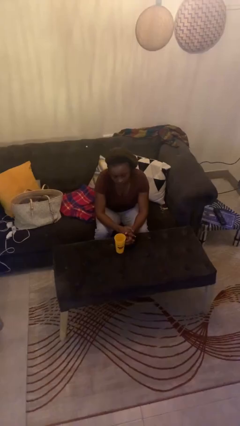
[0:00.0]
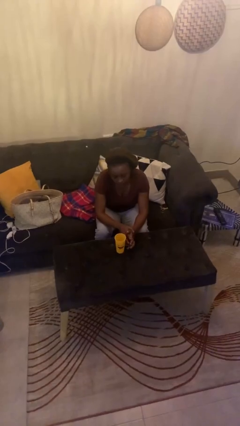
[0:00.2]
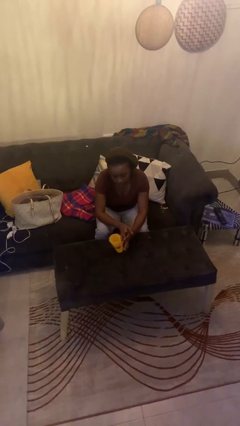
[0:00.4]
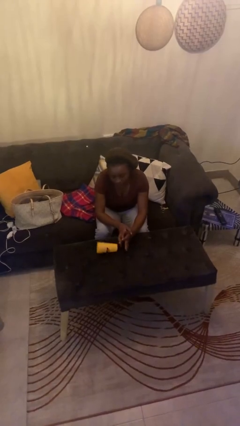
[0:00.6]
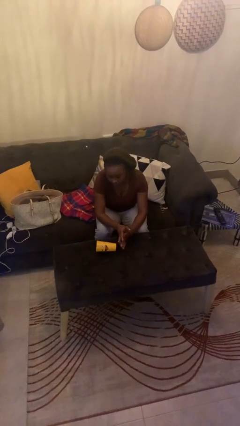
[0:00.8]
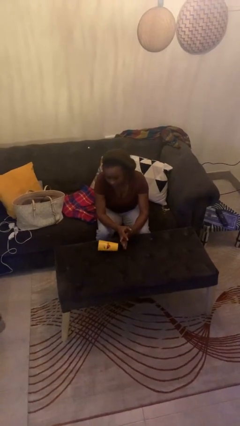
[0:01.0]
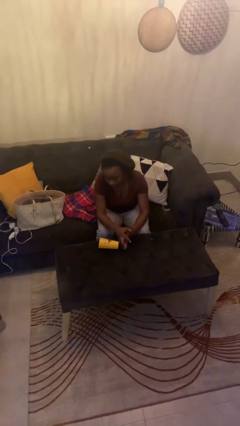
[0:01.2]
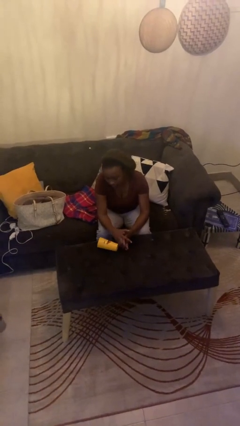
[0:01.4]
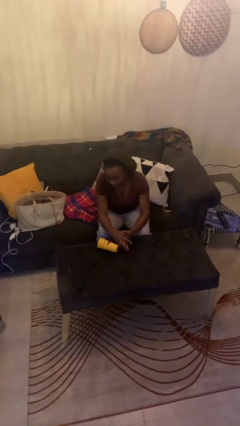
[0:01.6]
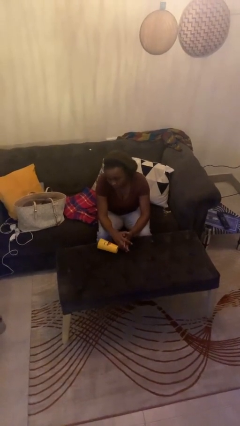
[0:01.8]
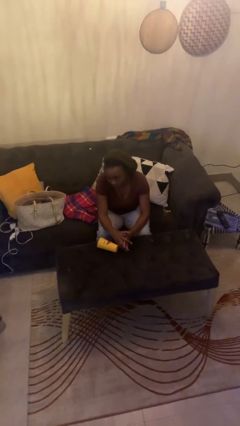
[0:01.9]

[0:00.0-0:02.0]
person knocks over glass

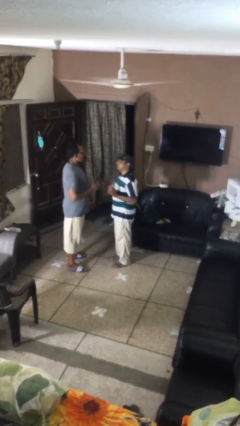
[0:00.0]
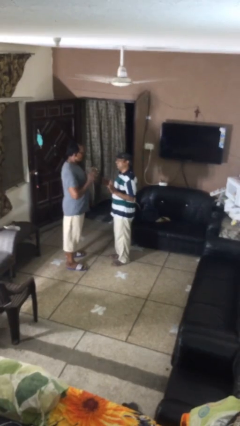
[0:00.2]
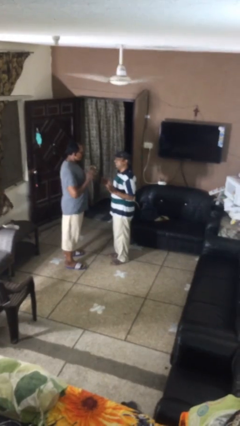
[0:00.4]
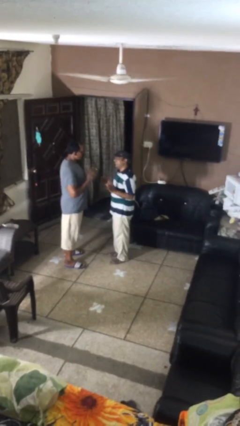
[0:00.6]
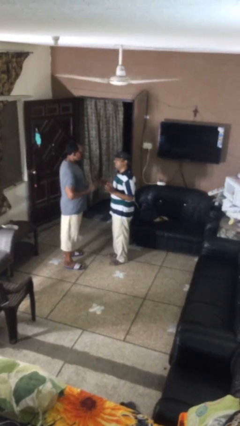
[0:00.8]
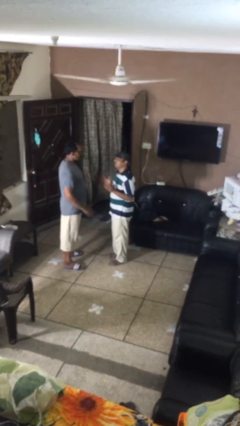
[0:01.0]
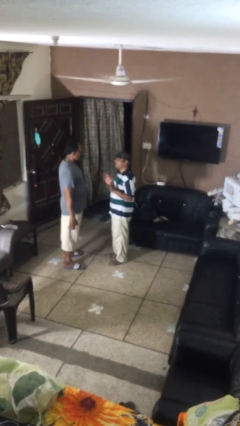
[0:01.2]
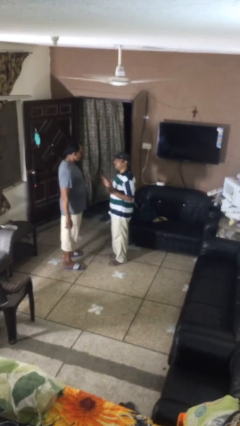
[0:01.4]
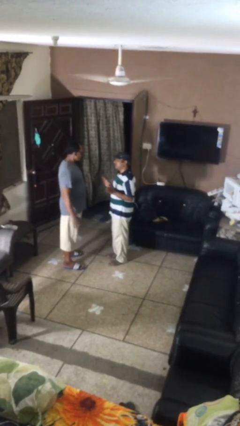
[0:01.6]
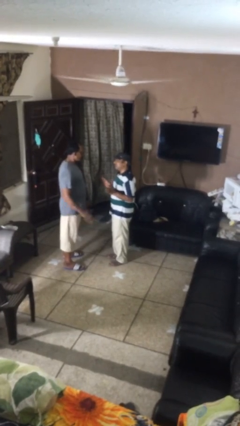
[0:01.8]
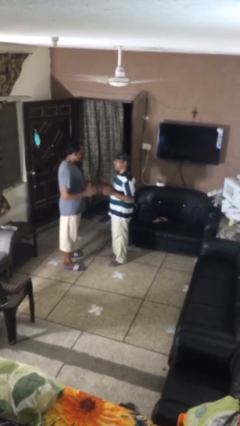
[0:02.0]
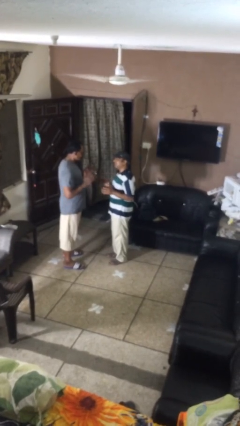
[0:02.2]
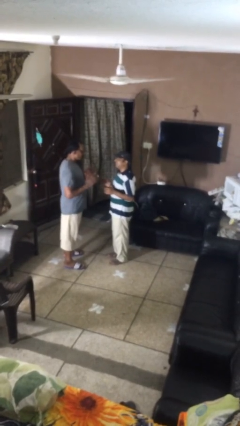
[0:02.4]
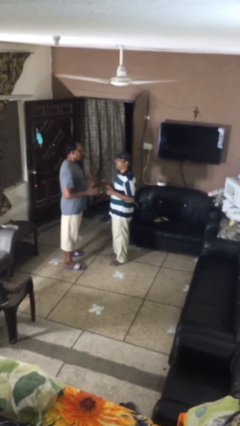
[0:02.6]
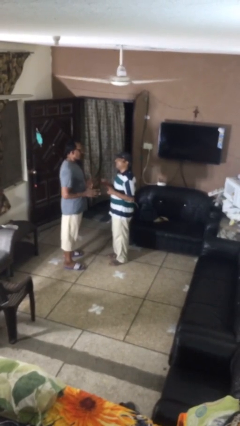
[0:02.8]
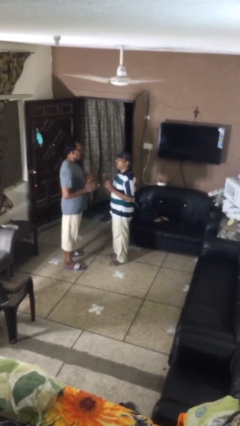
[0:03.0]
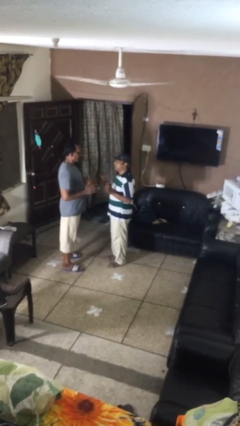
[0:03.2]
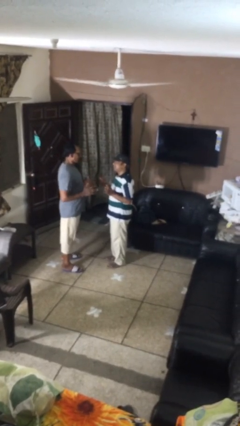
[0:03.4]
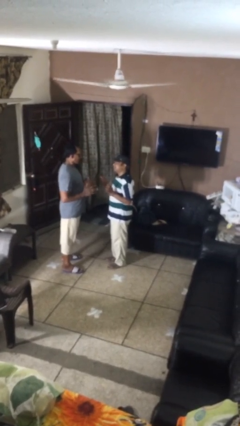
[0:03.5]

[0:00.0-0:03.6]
person talks to person

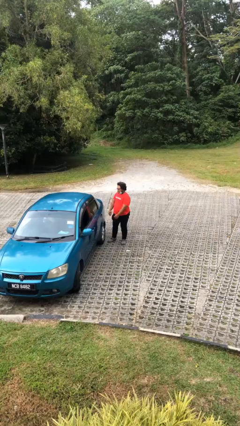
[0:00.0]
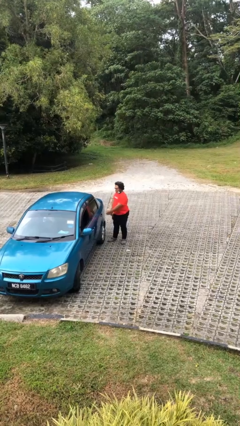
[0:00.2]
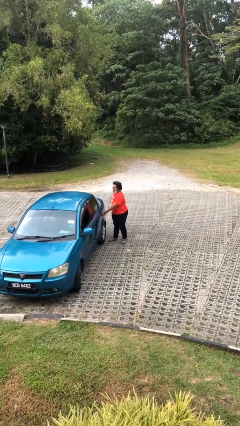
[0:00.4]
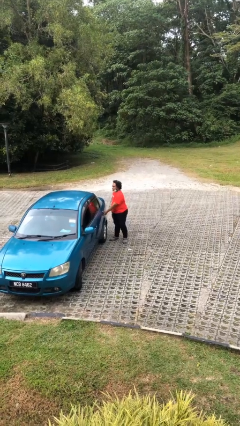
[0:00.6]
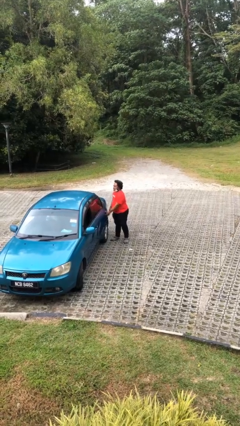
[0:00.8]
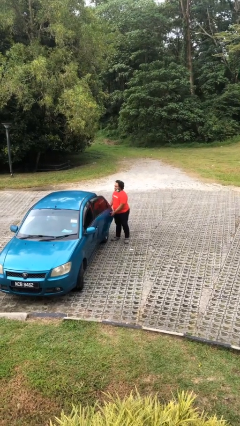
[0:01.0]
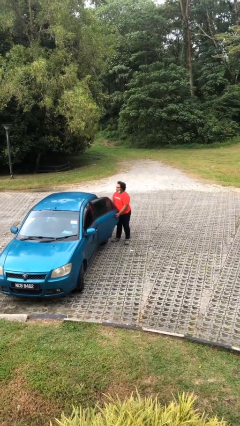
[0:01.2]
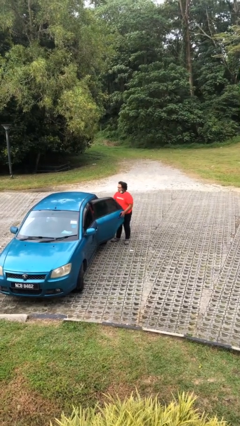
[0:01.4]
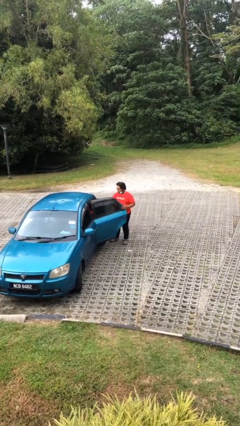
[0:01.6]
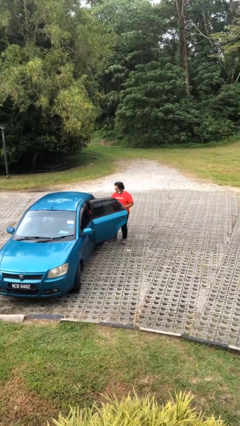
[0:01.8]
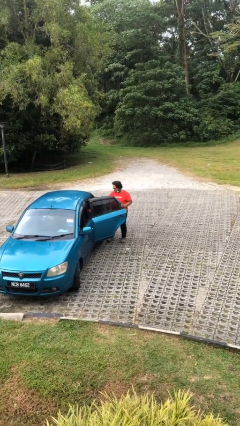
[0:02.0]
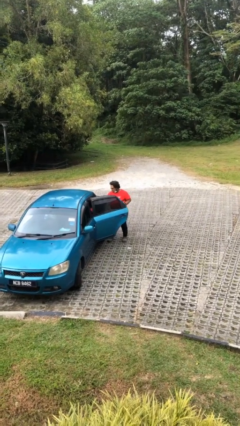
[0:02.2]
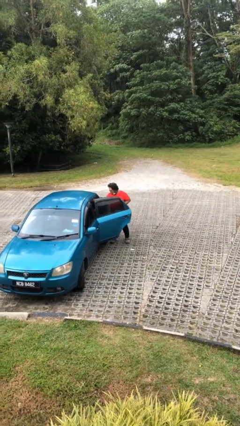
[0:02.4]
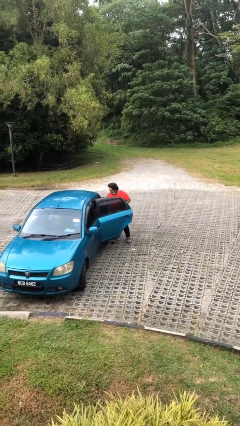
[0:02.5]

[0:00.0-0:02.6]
person opens car door

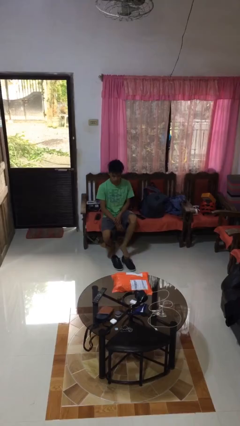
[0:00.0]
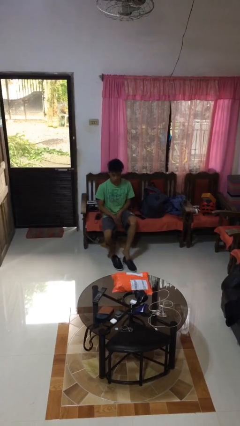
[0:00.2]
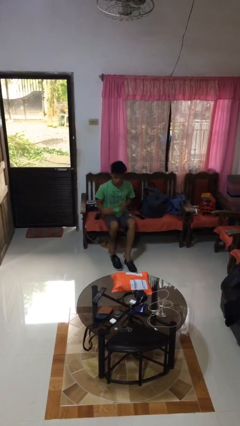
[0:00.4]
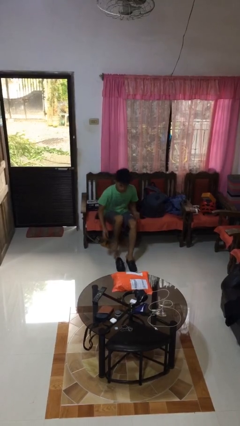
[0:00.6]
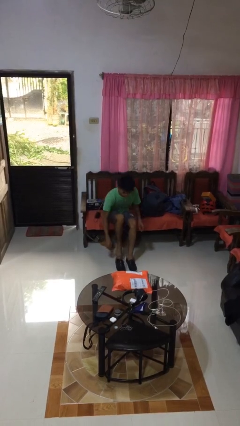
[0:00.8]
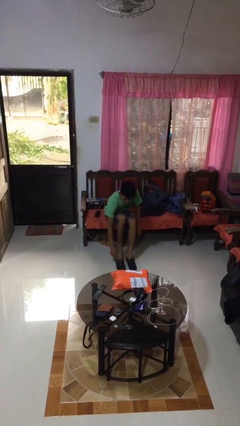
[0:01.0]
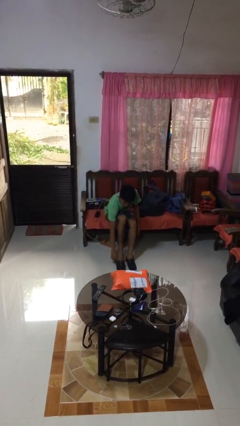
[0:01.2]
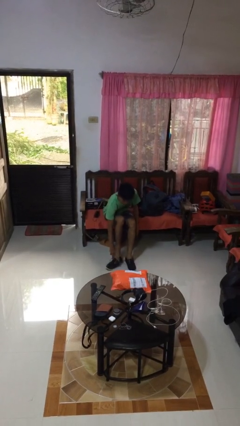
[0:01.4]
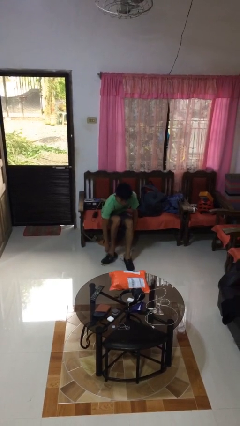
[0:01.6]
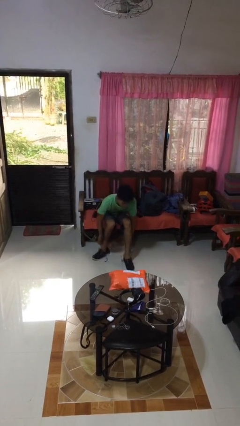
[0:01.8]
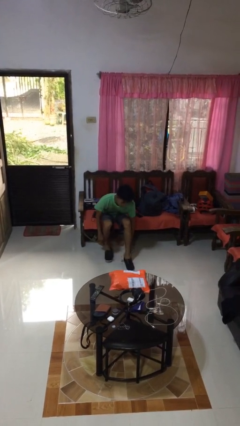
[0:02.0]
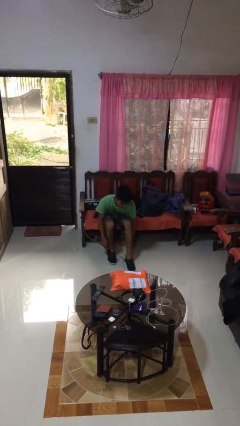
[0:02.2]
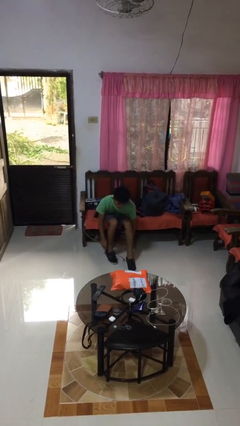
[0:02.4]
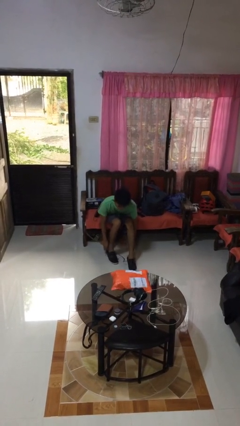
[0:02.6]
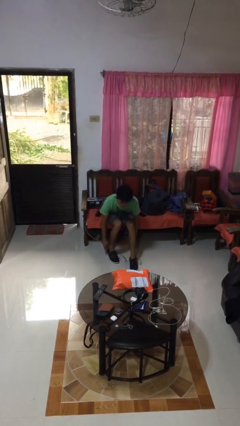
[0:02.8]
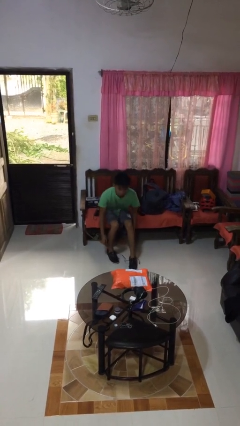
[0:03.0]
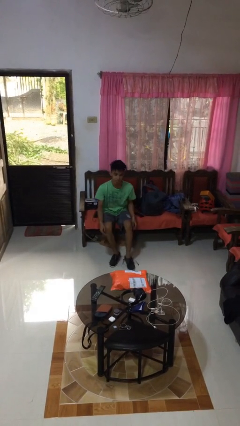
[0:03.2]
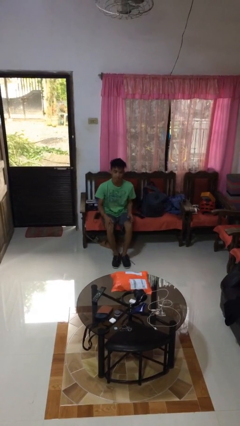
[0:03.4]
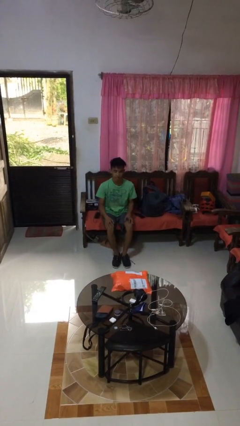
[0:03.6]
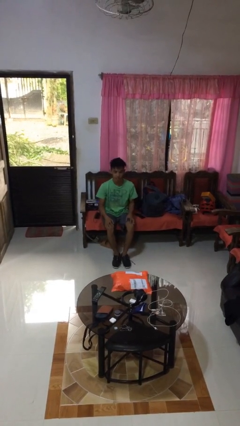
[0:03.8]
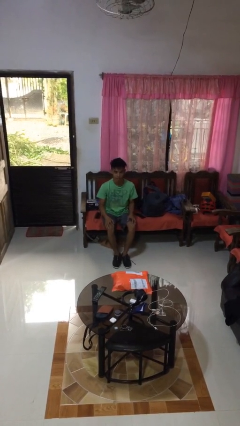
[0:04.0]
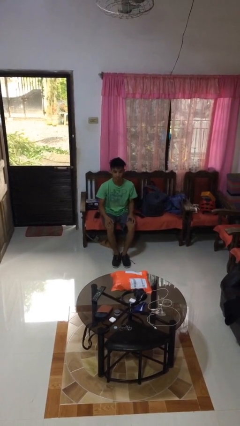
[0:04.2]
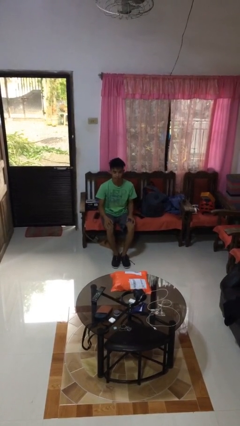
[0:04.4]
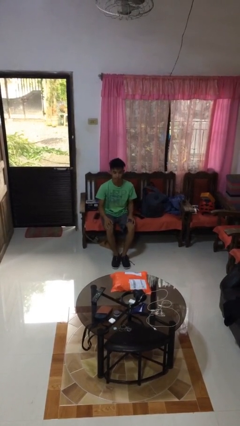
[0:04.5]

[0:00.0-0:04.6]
person puts on shoes

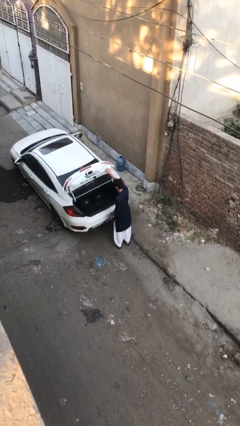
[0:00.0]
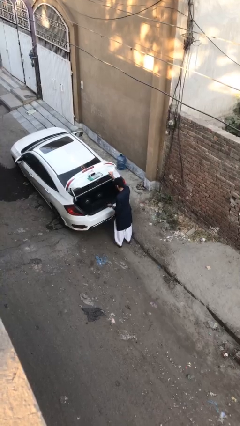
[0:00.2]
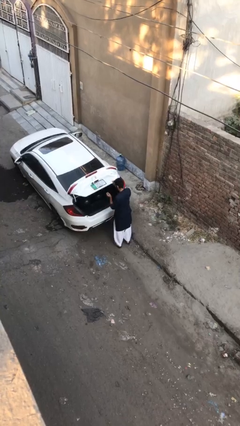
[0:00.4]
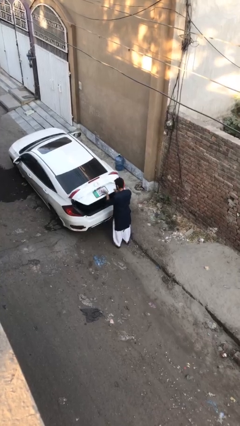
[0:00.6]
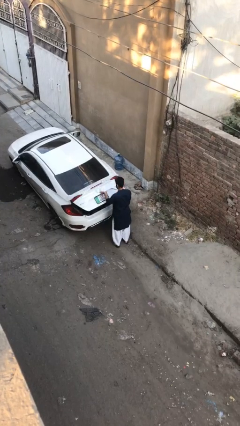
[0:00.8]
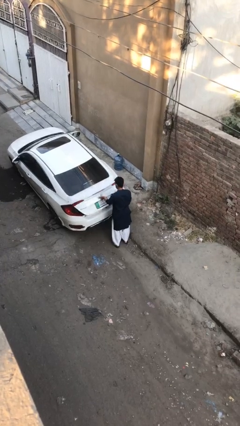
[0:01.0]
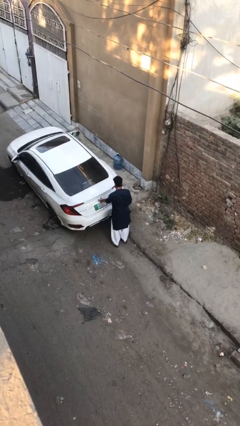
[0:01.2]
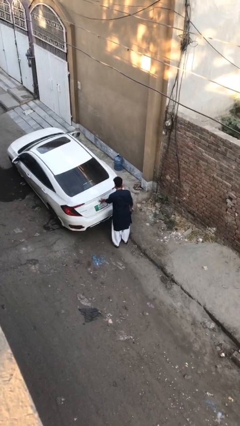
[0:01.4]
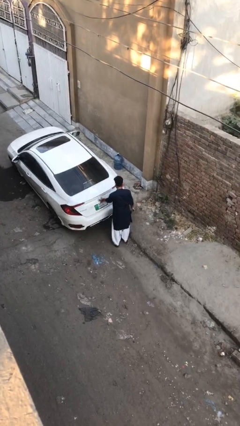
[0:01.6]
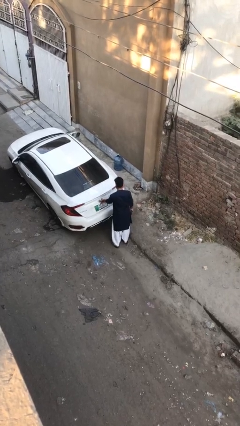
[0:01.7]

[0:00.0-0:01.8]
person closes car trunk

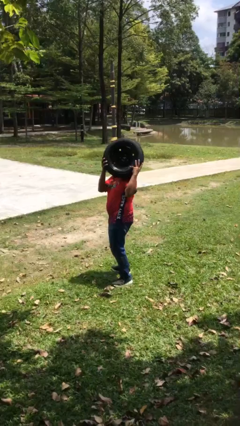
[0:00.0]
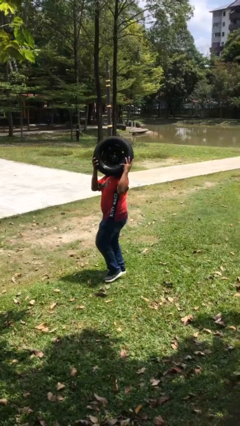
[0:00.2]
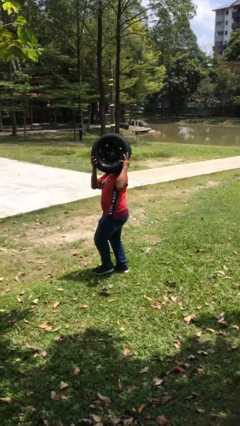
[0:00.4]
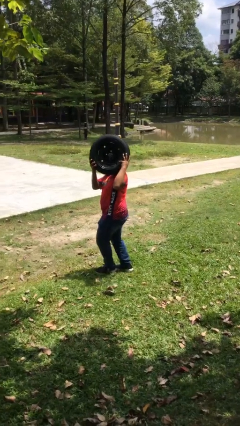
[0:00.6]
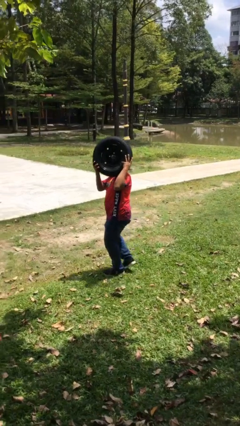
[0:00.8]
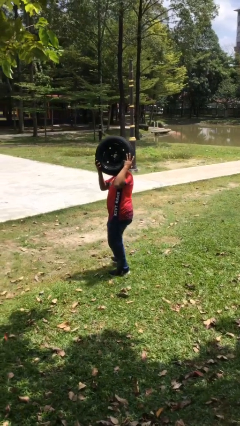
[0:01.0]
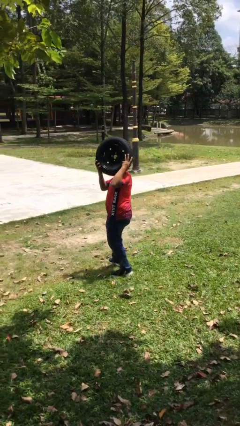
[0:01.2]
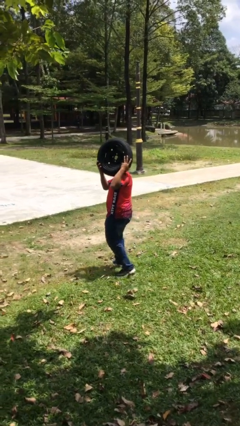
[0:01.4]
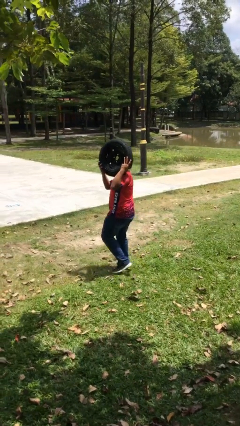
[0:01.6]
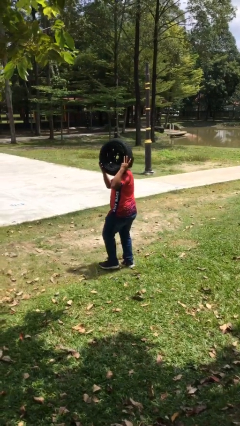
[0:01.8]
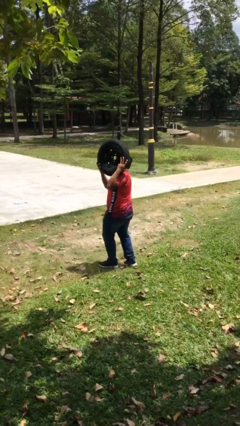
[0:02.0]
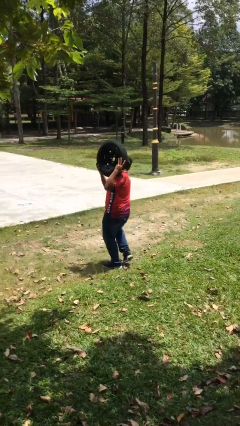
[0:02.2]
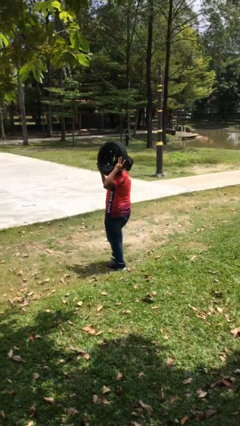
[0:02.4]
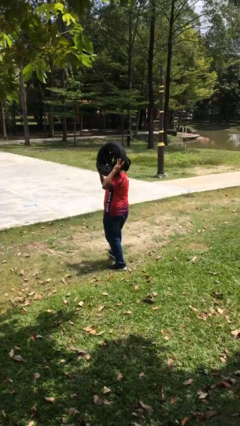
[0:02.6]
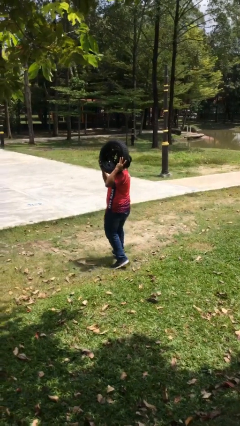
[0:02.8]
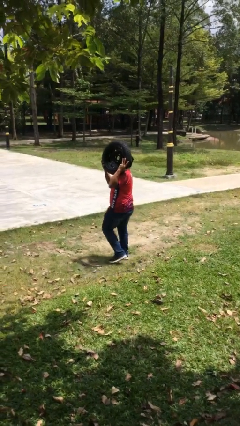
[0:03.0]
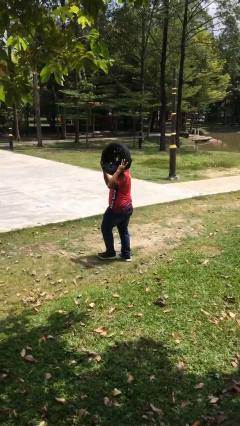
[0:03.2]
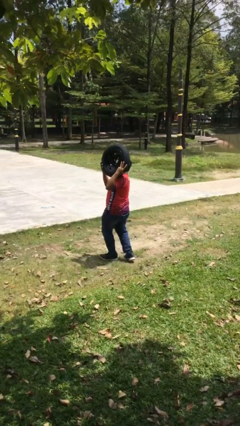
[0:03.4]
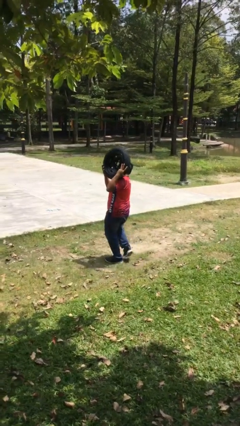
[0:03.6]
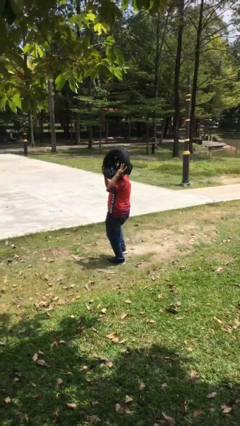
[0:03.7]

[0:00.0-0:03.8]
person carries heavy object
